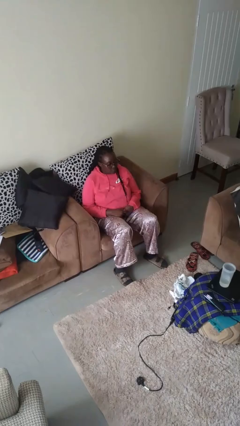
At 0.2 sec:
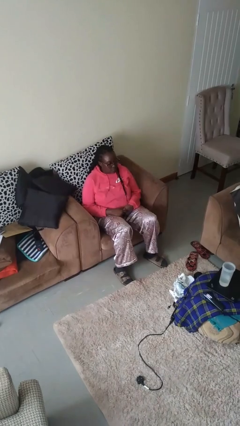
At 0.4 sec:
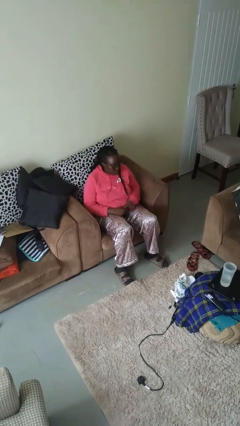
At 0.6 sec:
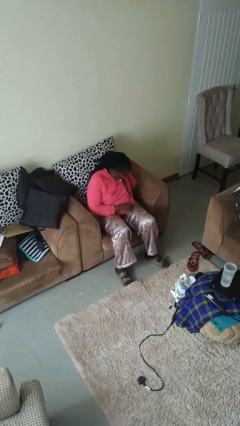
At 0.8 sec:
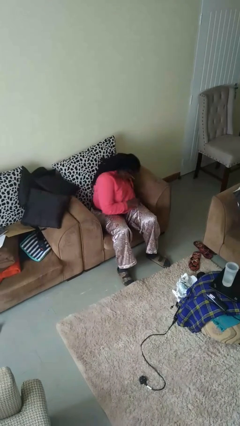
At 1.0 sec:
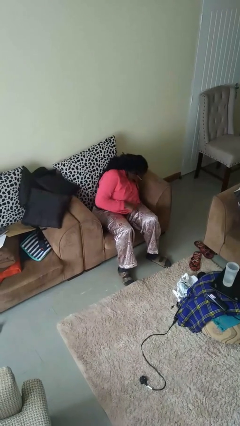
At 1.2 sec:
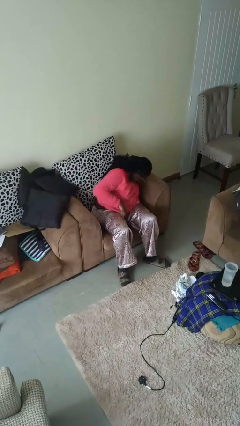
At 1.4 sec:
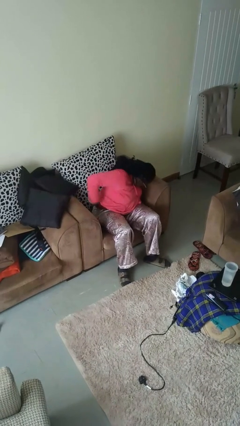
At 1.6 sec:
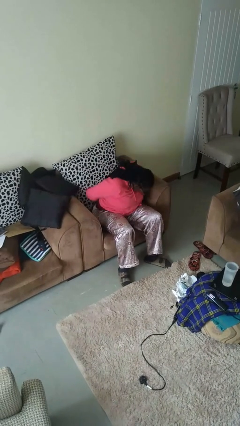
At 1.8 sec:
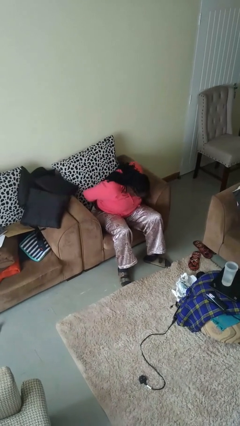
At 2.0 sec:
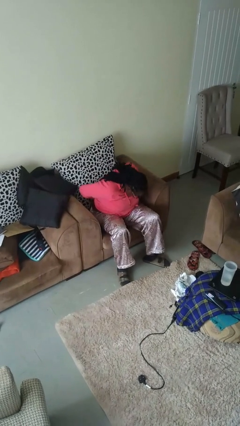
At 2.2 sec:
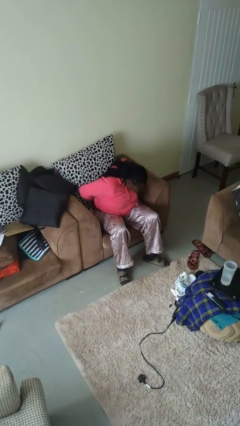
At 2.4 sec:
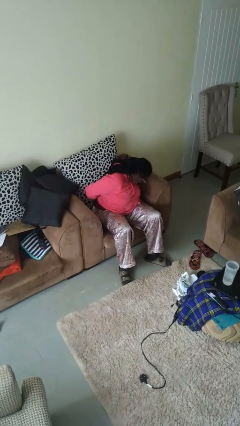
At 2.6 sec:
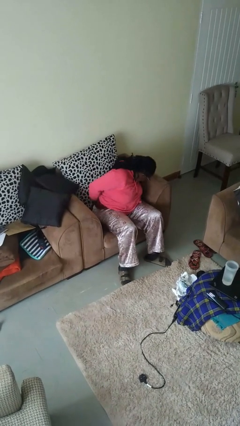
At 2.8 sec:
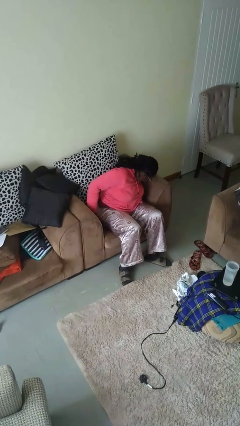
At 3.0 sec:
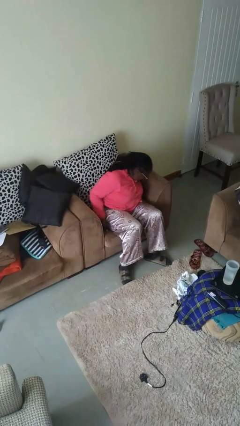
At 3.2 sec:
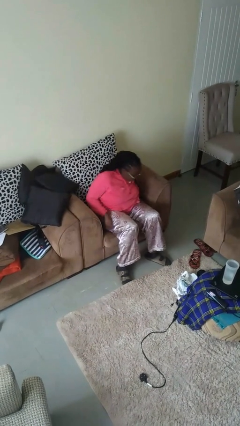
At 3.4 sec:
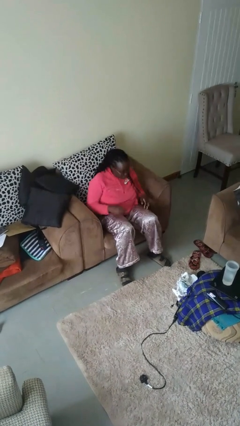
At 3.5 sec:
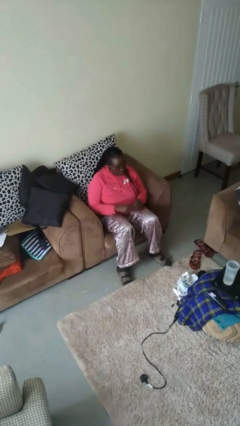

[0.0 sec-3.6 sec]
person searches in couch
